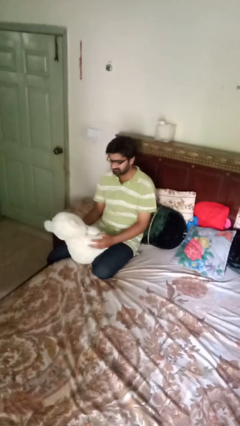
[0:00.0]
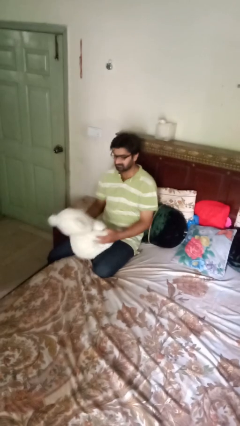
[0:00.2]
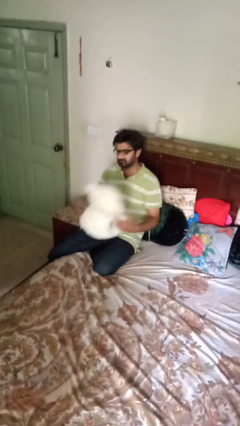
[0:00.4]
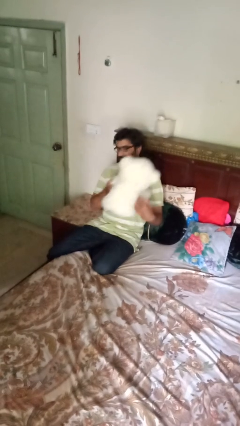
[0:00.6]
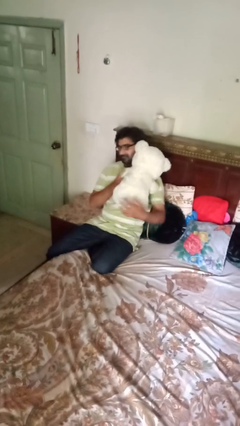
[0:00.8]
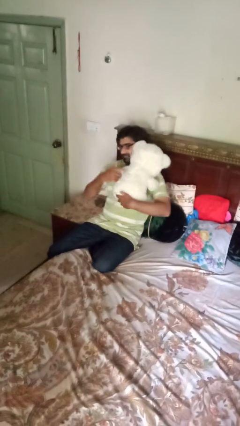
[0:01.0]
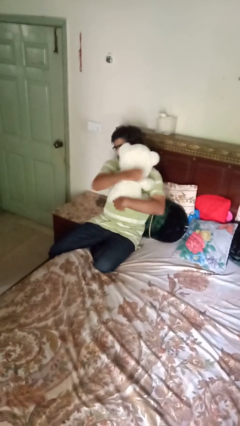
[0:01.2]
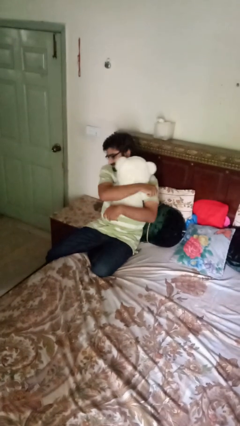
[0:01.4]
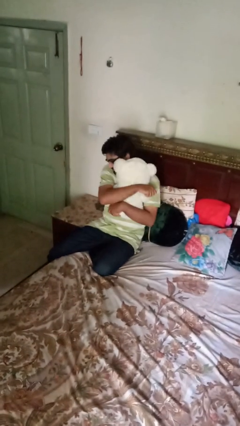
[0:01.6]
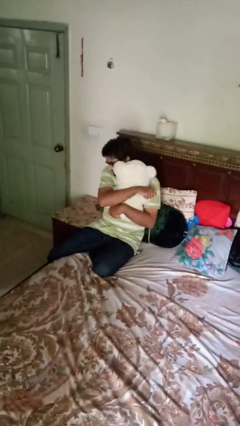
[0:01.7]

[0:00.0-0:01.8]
person hugs stuffed animal

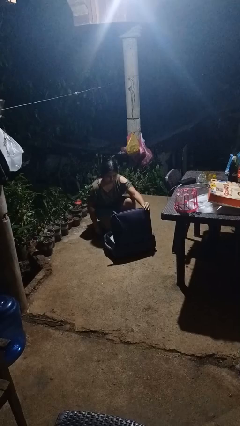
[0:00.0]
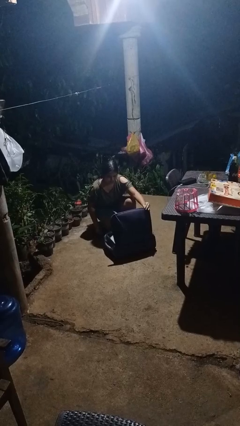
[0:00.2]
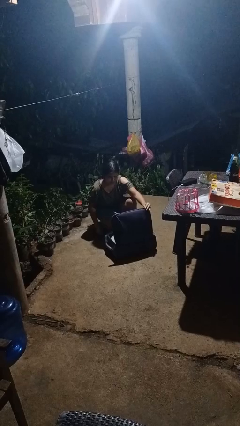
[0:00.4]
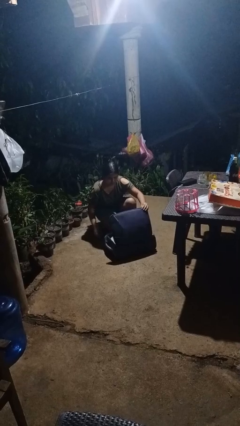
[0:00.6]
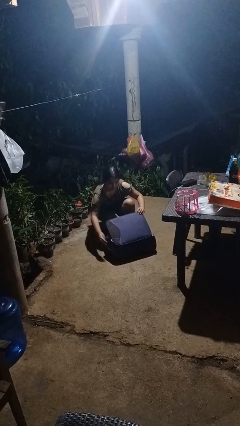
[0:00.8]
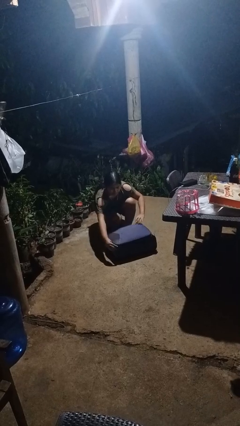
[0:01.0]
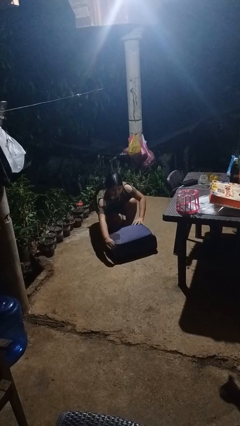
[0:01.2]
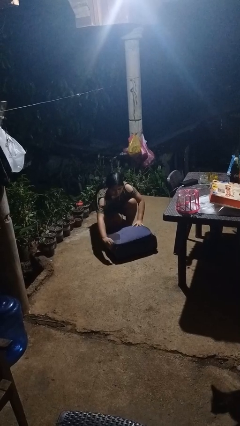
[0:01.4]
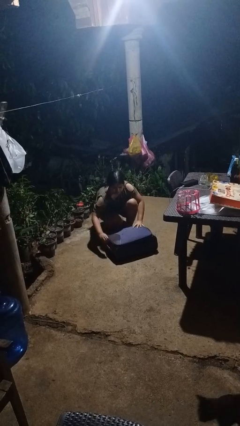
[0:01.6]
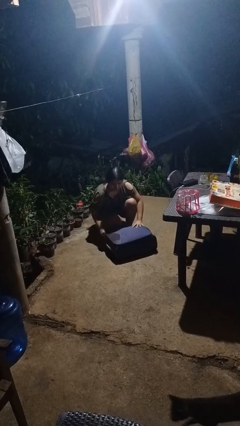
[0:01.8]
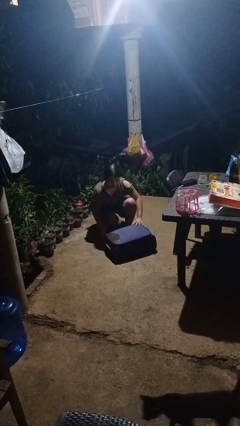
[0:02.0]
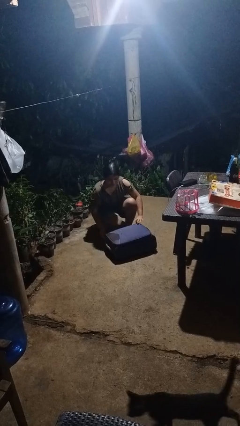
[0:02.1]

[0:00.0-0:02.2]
person closes suitcase

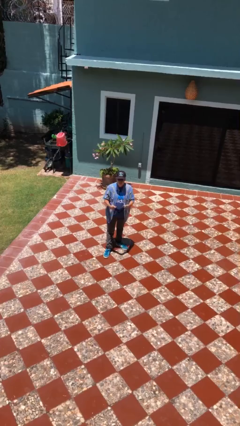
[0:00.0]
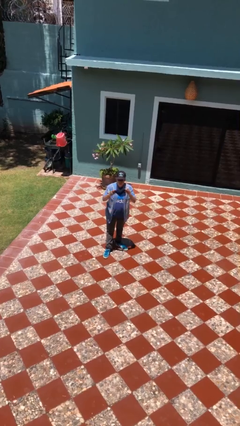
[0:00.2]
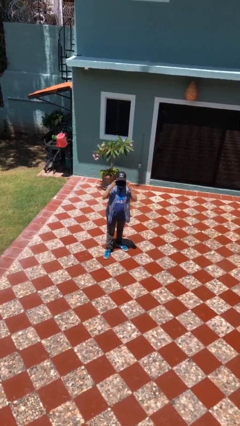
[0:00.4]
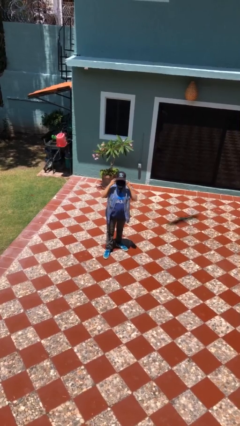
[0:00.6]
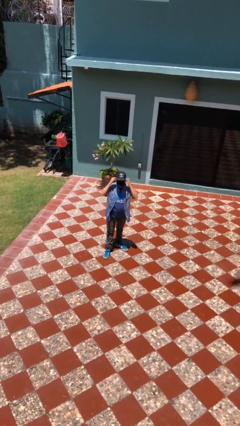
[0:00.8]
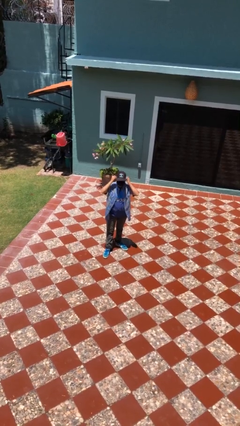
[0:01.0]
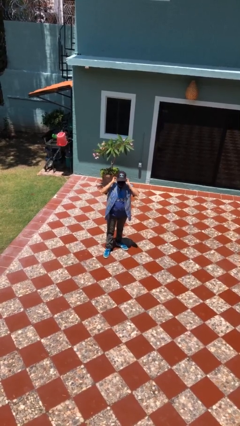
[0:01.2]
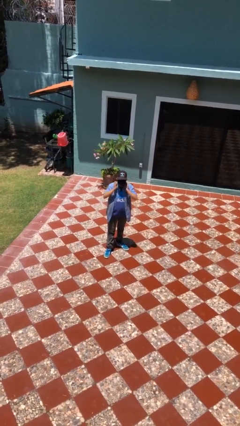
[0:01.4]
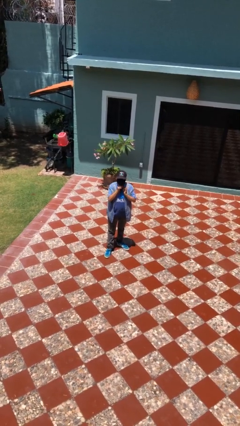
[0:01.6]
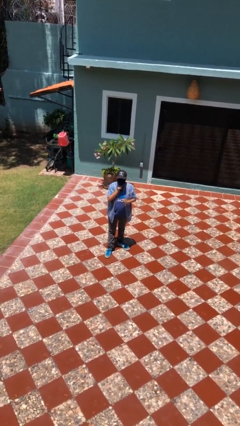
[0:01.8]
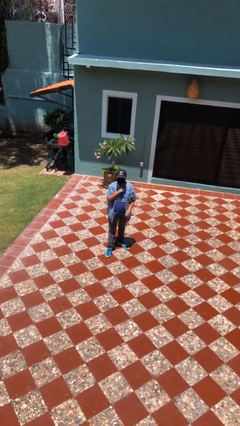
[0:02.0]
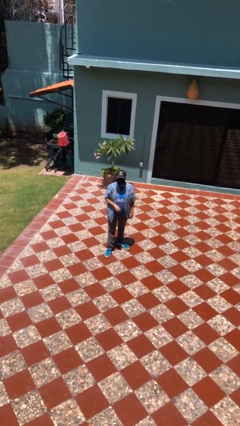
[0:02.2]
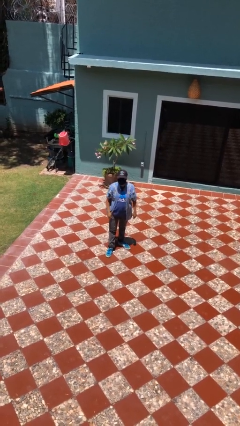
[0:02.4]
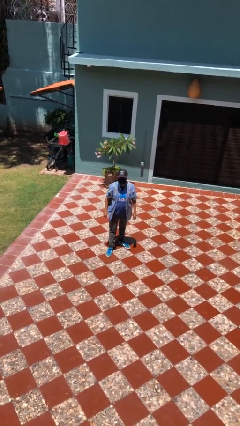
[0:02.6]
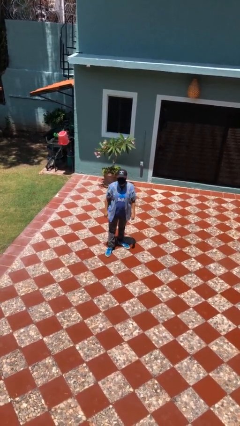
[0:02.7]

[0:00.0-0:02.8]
person puts on facemask

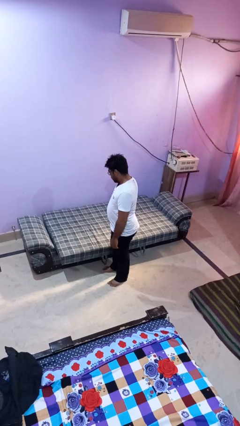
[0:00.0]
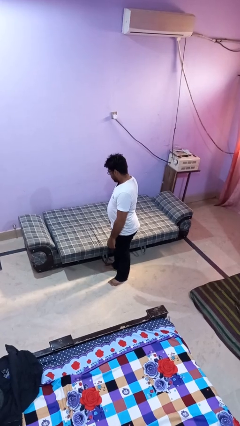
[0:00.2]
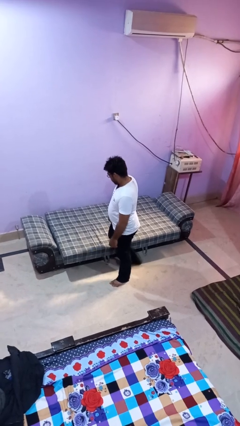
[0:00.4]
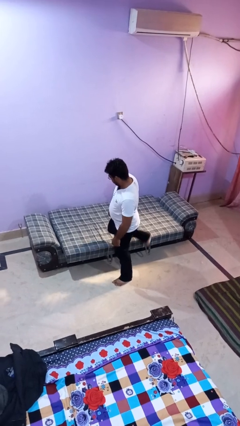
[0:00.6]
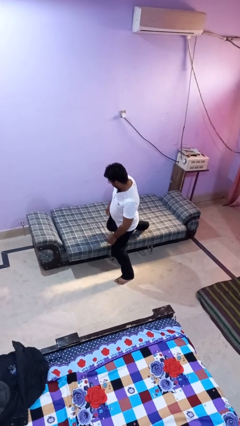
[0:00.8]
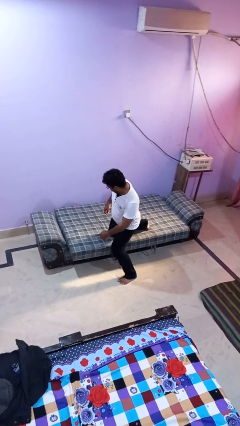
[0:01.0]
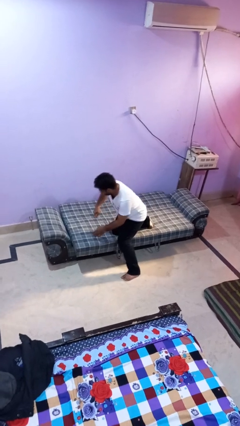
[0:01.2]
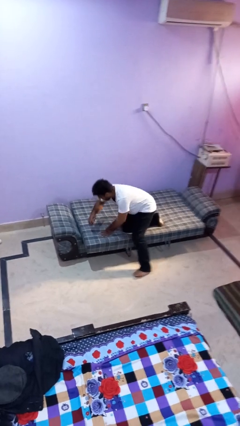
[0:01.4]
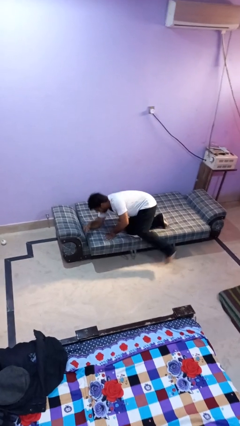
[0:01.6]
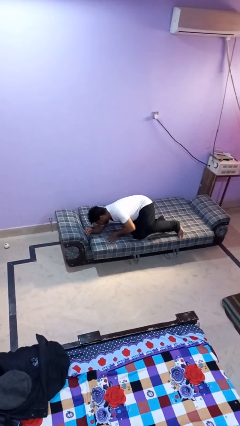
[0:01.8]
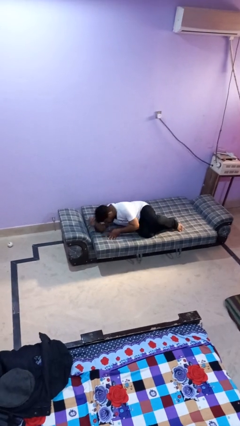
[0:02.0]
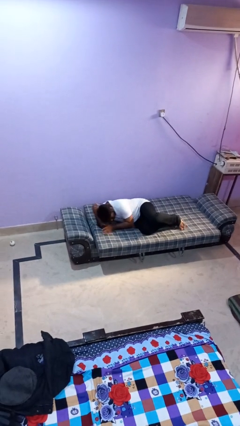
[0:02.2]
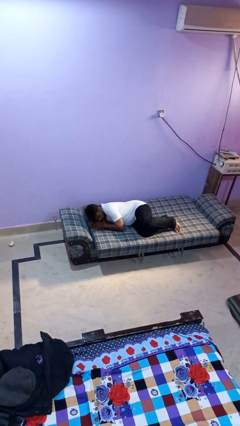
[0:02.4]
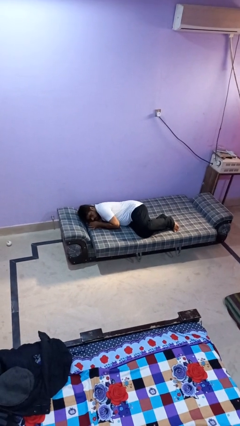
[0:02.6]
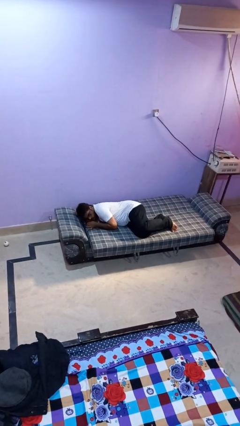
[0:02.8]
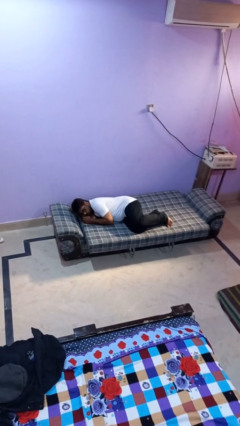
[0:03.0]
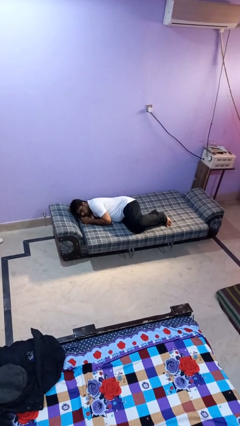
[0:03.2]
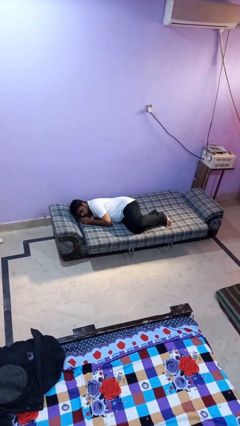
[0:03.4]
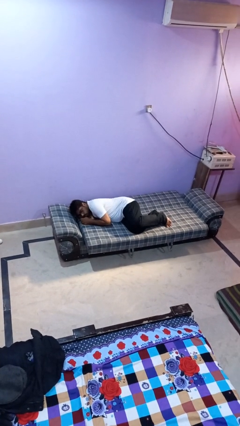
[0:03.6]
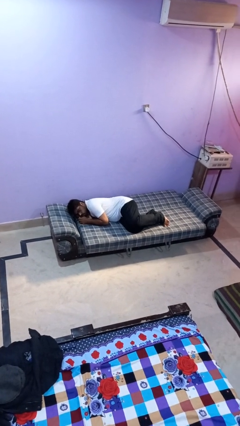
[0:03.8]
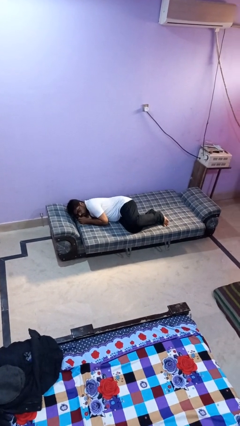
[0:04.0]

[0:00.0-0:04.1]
person lies down on bed

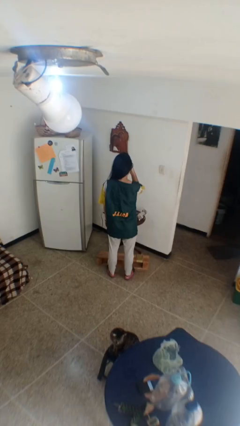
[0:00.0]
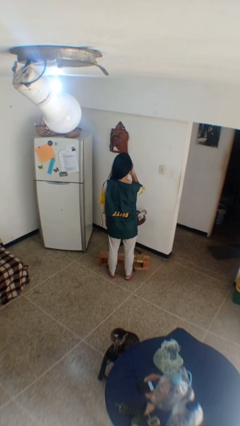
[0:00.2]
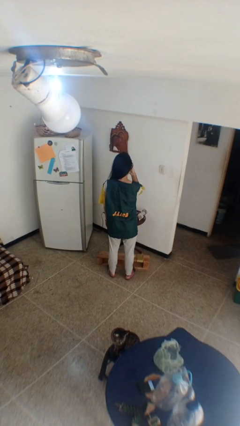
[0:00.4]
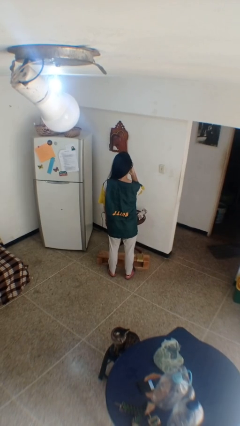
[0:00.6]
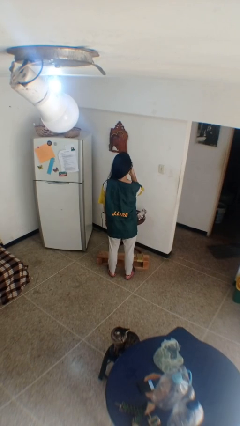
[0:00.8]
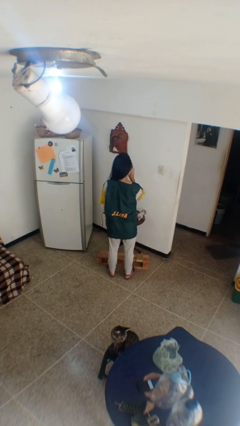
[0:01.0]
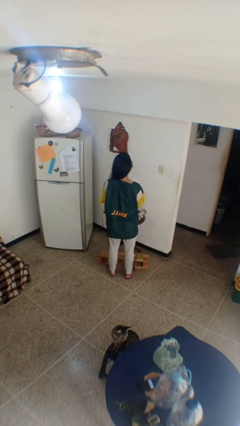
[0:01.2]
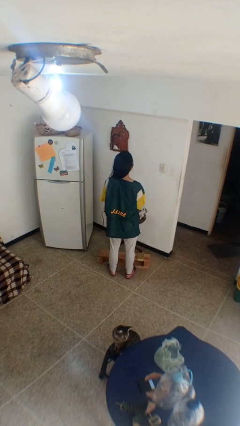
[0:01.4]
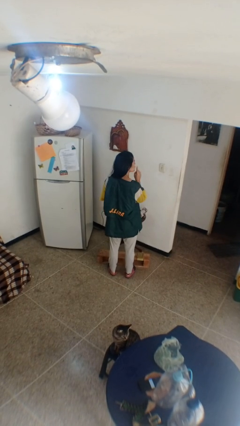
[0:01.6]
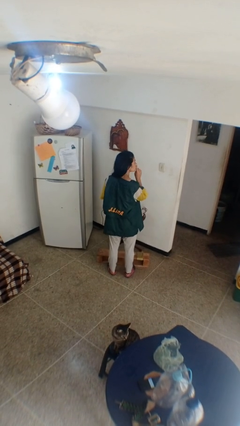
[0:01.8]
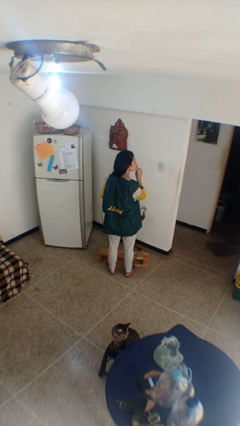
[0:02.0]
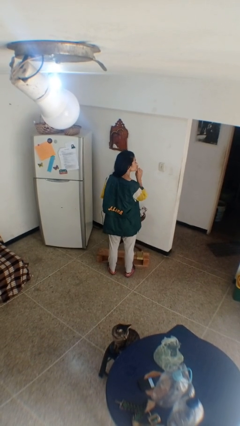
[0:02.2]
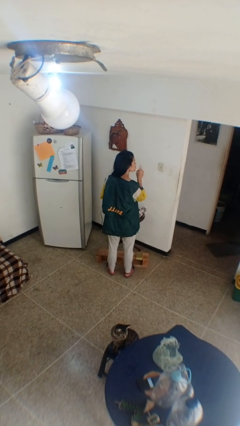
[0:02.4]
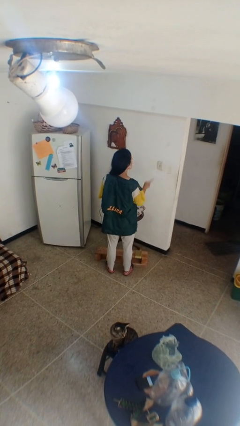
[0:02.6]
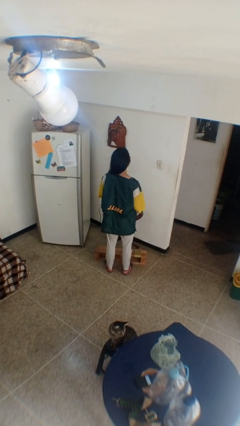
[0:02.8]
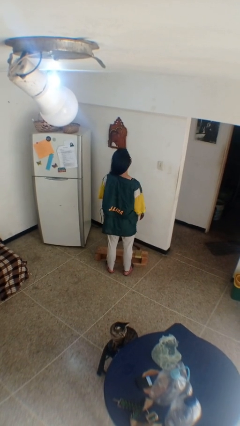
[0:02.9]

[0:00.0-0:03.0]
person gestures be quiet

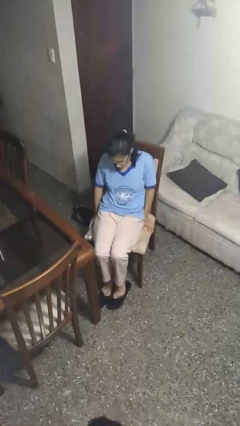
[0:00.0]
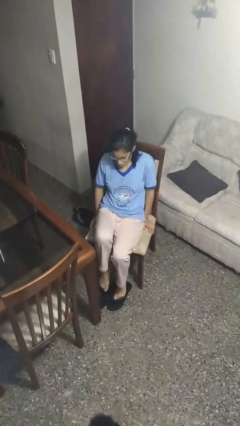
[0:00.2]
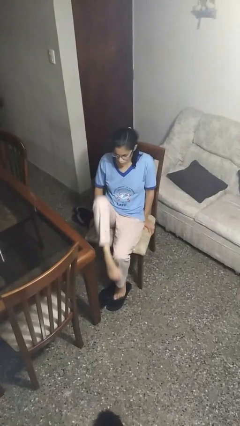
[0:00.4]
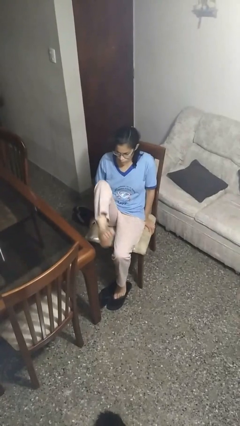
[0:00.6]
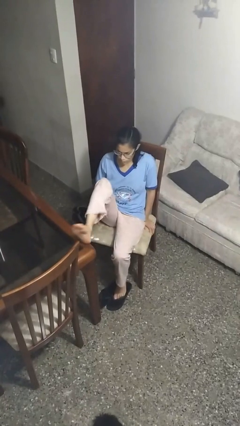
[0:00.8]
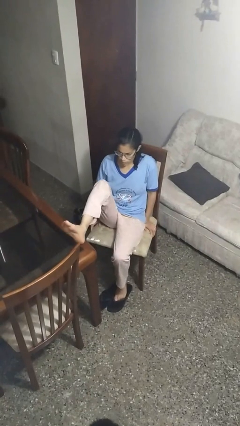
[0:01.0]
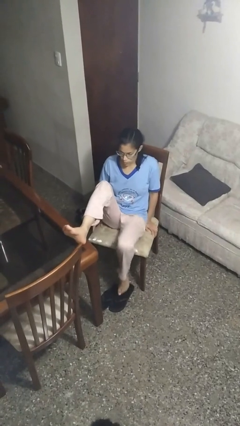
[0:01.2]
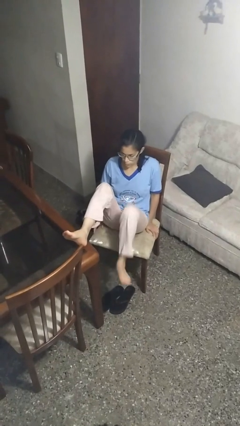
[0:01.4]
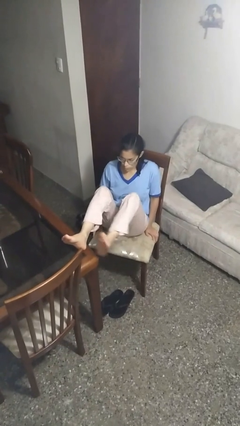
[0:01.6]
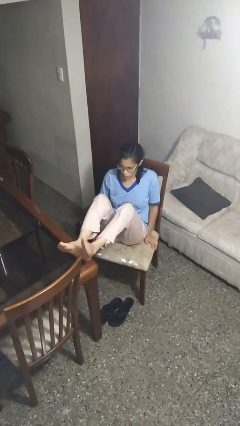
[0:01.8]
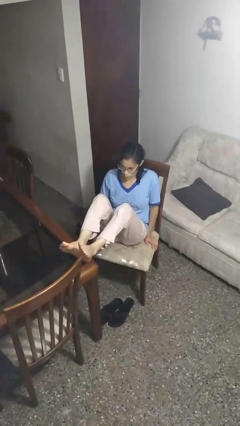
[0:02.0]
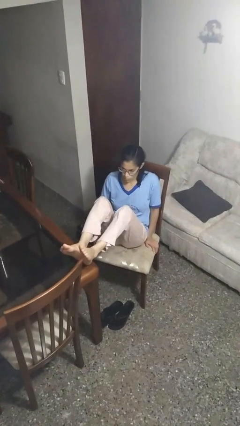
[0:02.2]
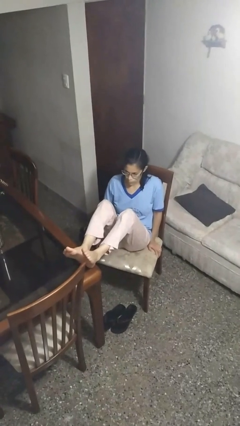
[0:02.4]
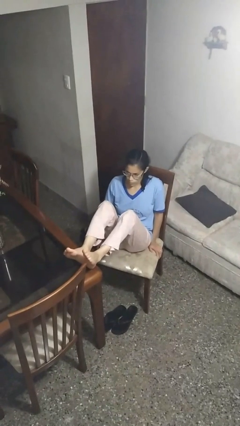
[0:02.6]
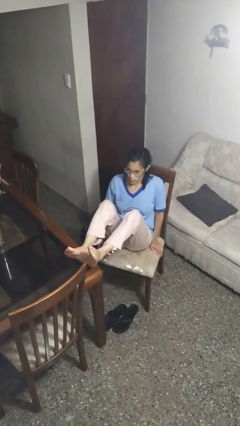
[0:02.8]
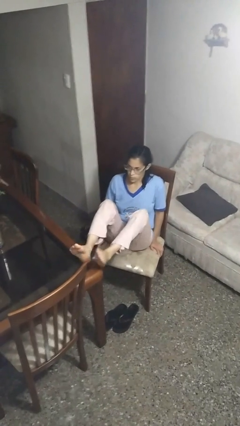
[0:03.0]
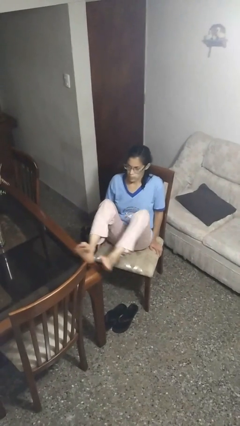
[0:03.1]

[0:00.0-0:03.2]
person puts feet up

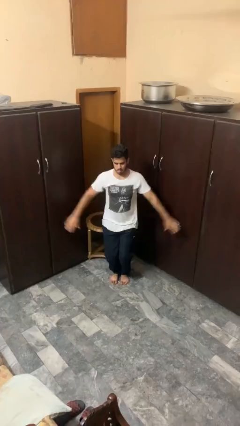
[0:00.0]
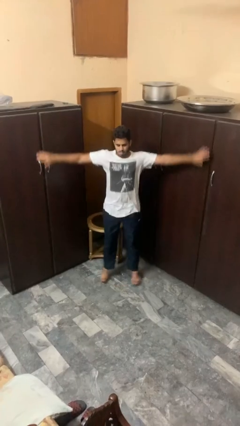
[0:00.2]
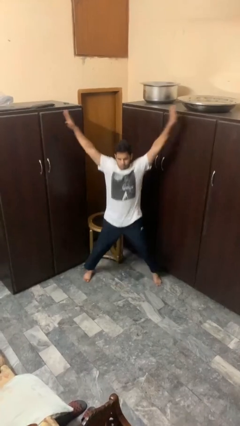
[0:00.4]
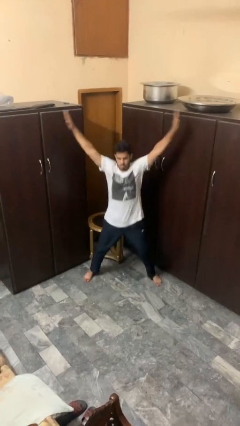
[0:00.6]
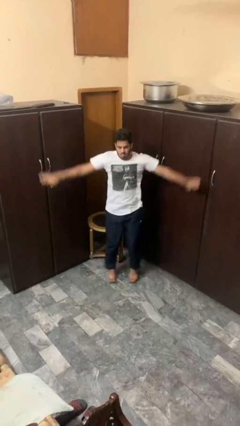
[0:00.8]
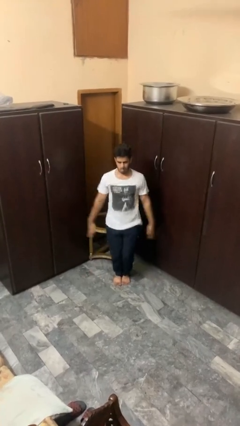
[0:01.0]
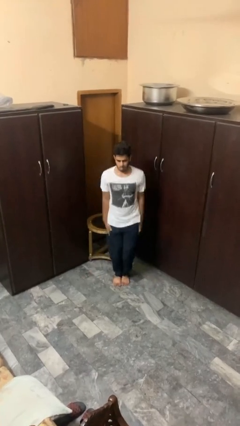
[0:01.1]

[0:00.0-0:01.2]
person exercises with jumping jacks
